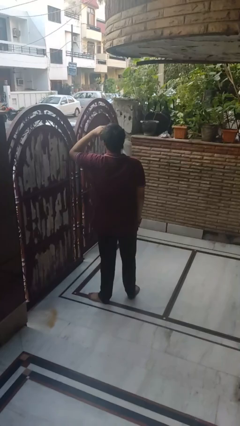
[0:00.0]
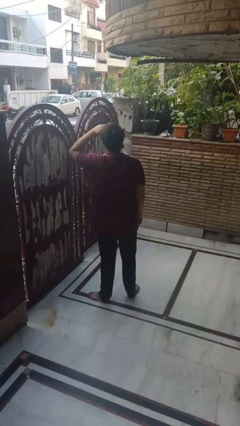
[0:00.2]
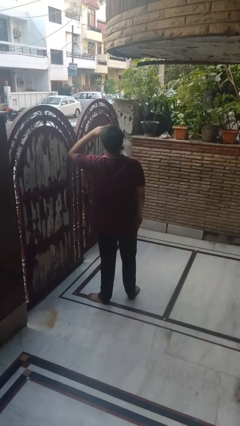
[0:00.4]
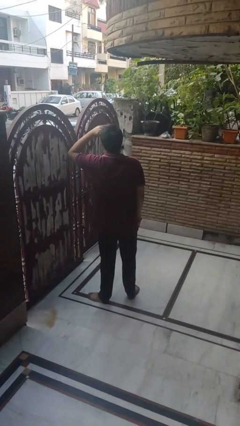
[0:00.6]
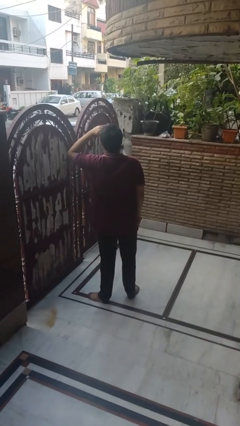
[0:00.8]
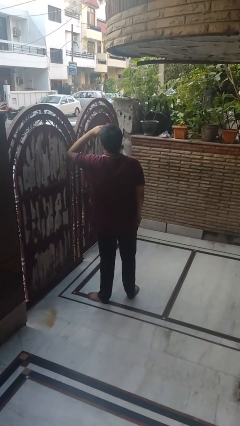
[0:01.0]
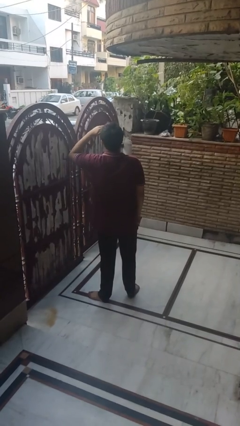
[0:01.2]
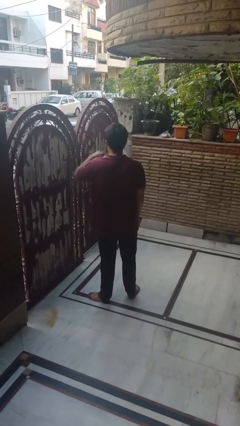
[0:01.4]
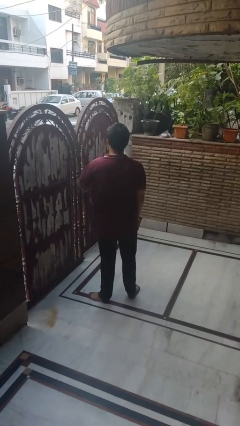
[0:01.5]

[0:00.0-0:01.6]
person shades eyes

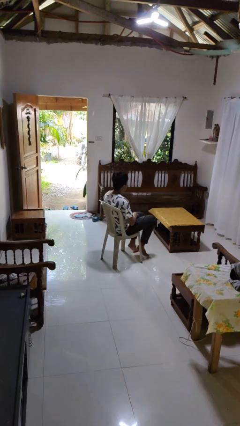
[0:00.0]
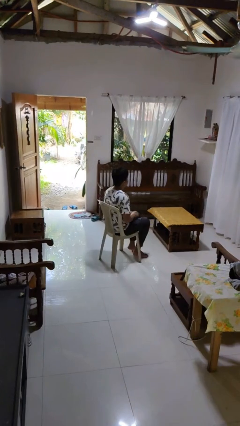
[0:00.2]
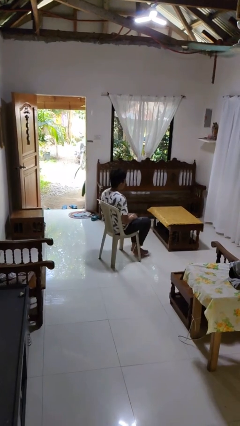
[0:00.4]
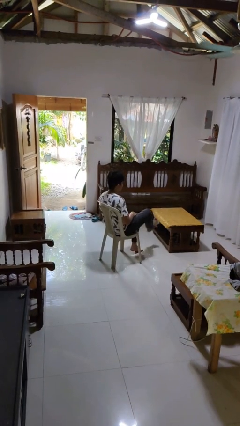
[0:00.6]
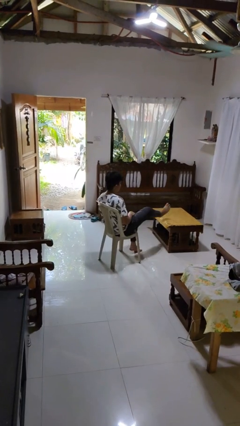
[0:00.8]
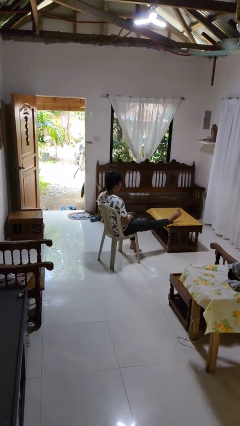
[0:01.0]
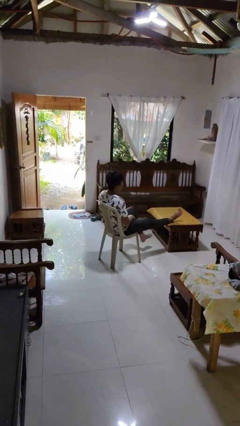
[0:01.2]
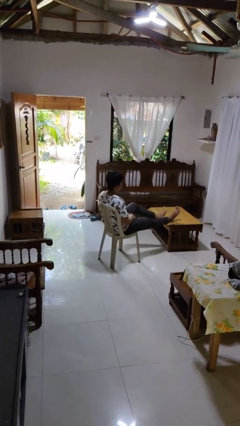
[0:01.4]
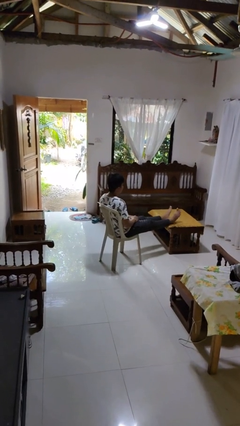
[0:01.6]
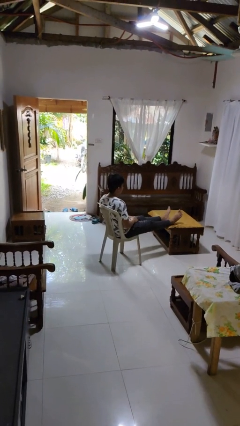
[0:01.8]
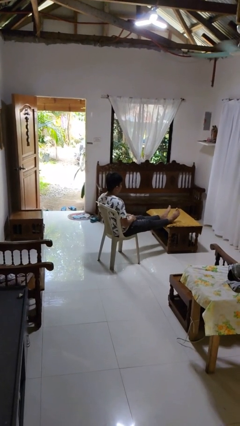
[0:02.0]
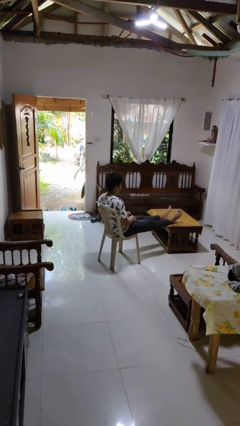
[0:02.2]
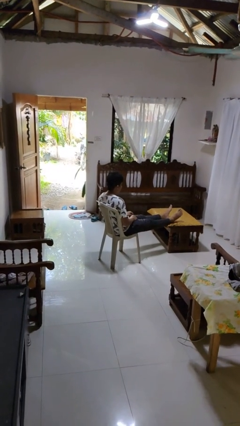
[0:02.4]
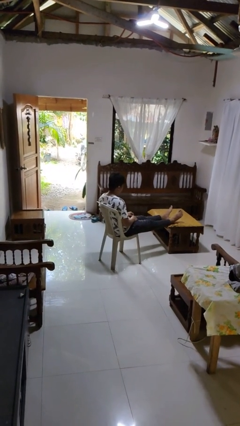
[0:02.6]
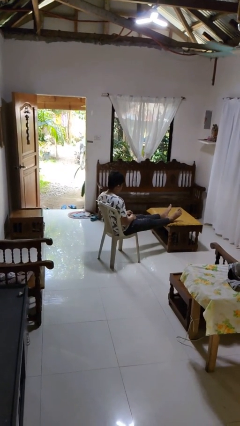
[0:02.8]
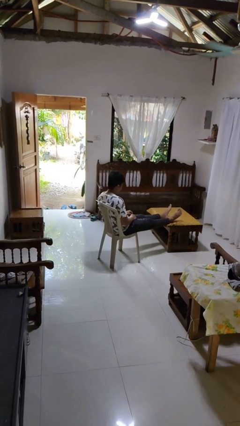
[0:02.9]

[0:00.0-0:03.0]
person puts feet up

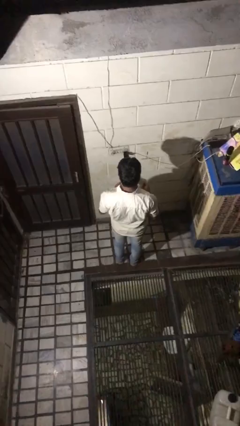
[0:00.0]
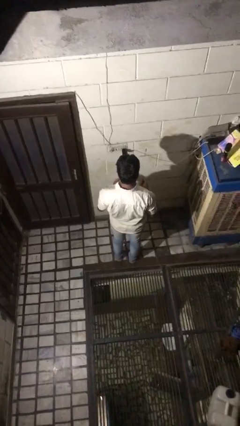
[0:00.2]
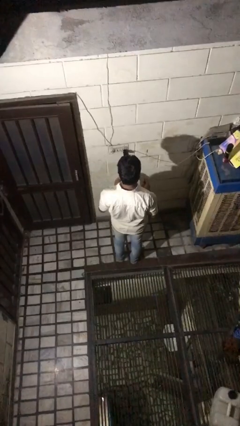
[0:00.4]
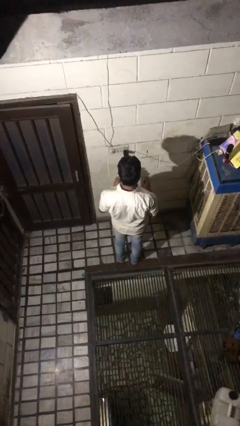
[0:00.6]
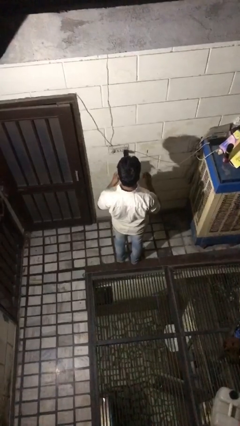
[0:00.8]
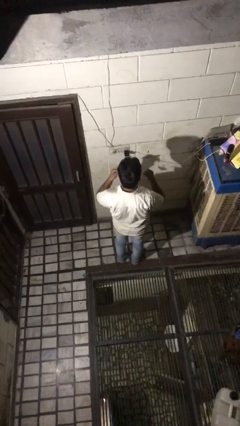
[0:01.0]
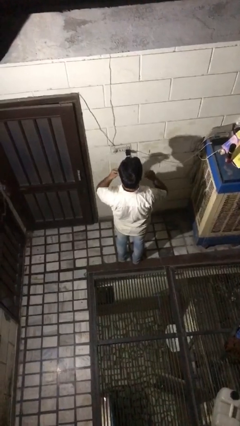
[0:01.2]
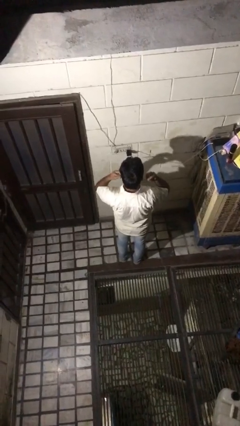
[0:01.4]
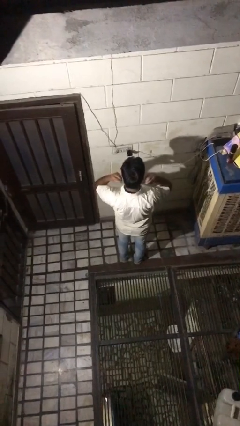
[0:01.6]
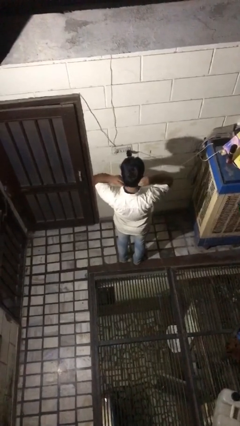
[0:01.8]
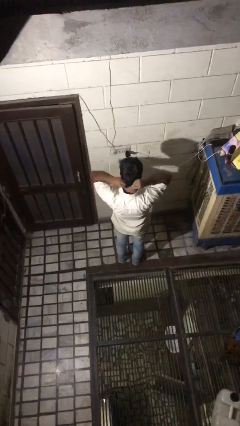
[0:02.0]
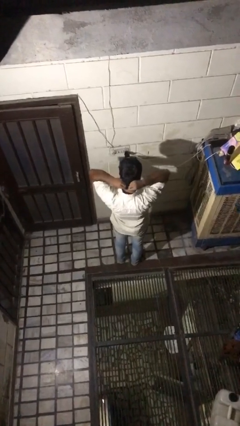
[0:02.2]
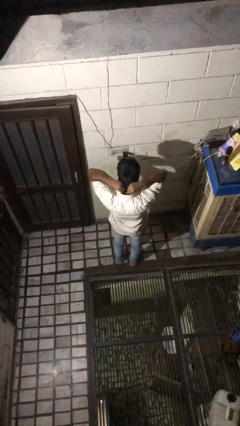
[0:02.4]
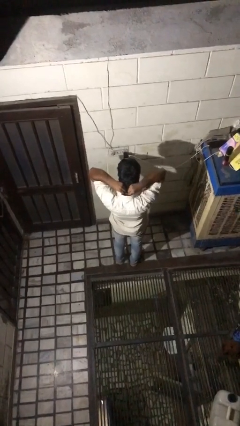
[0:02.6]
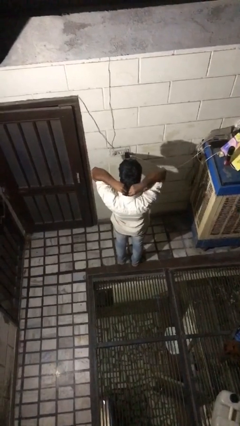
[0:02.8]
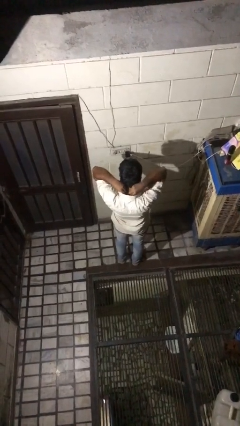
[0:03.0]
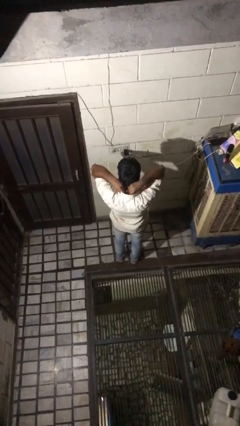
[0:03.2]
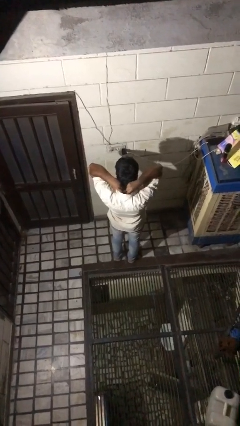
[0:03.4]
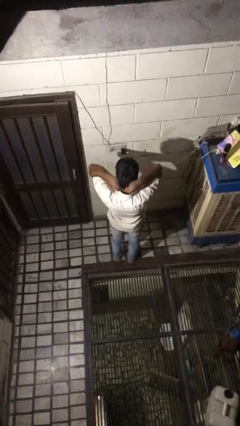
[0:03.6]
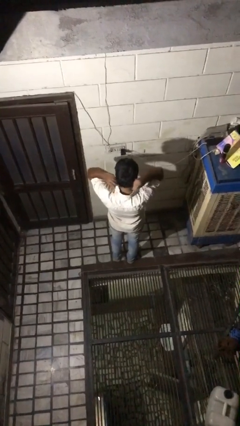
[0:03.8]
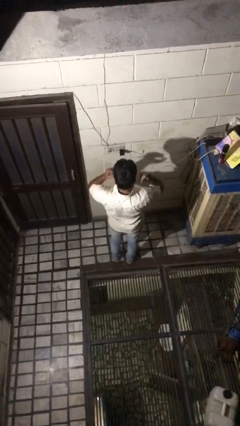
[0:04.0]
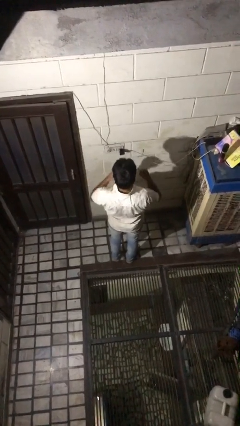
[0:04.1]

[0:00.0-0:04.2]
person puts on necklace

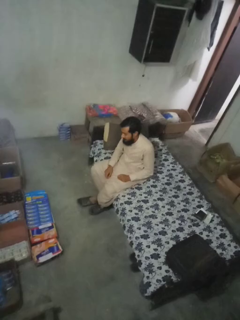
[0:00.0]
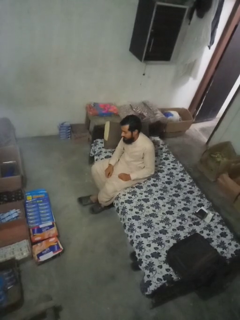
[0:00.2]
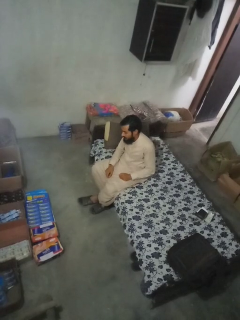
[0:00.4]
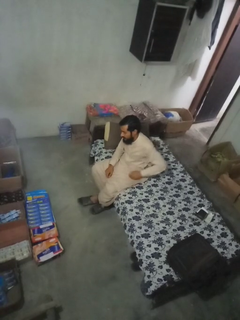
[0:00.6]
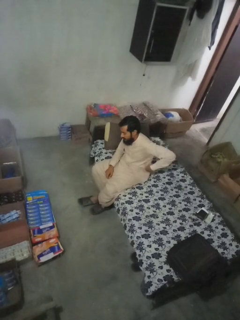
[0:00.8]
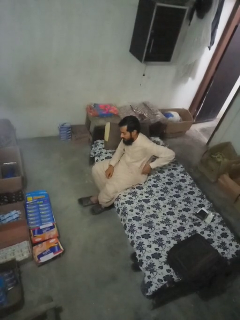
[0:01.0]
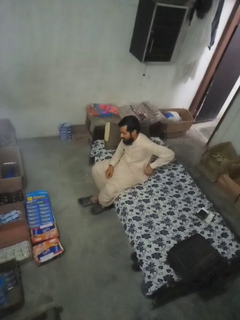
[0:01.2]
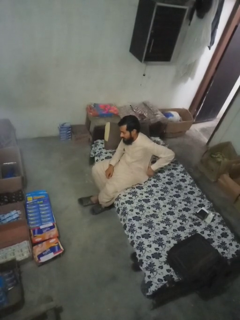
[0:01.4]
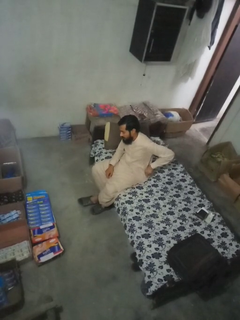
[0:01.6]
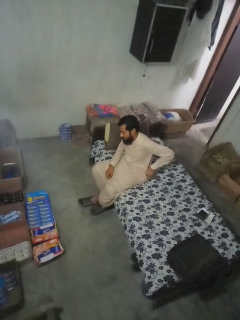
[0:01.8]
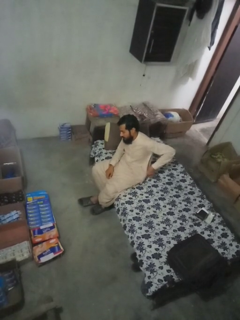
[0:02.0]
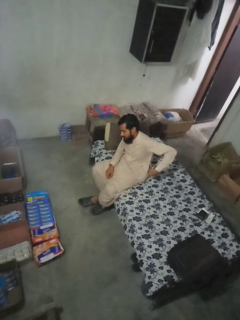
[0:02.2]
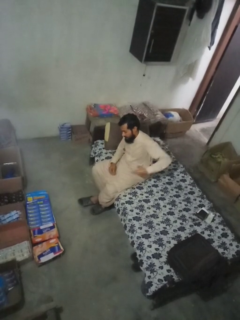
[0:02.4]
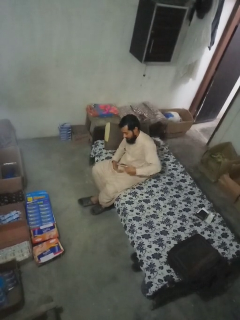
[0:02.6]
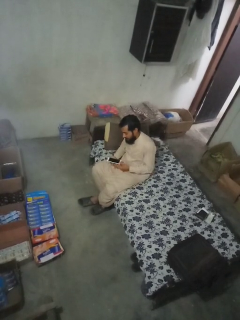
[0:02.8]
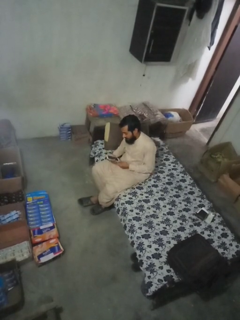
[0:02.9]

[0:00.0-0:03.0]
person takes phone from pocket

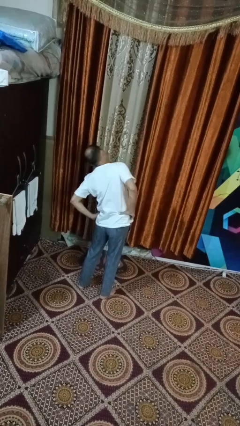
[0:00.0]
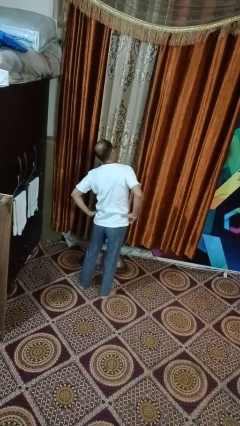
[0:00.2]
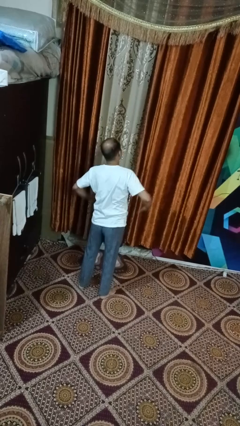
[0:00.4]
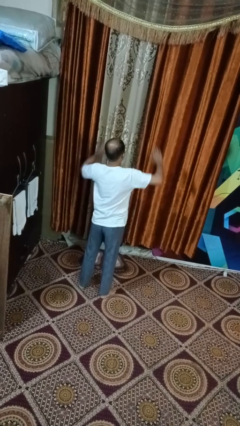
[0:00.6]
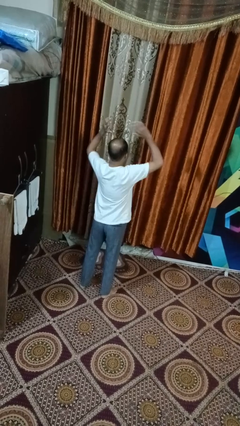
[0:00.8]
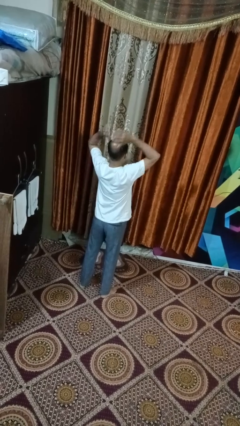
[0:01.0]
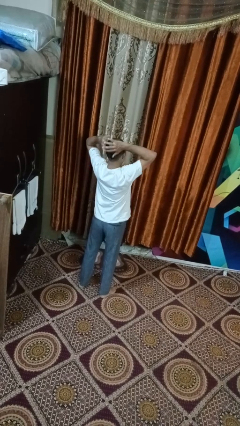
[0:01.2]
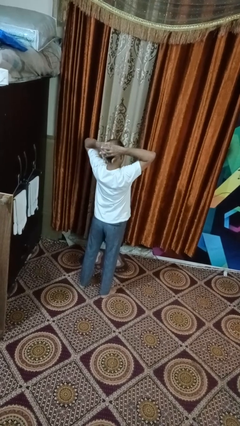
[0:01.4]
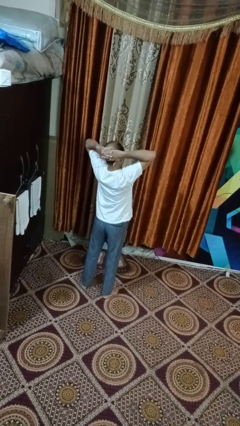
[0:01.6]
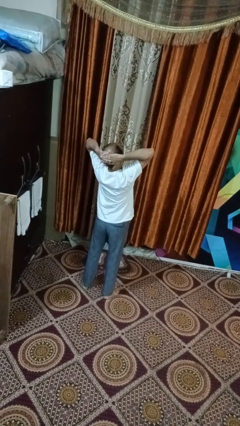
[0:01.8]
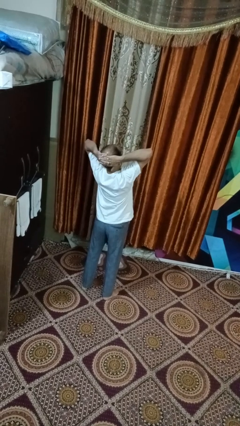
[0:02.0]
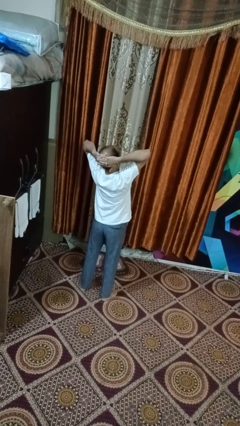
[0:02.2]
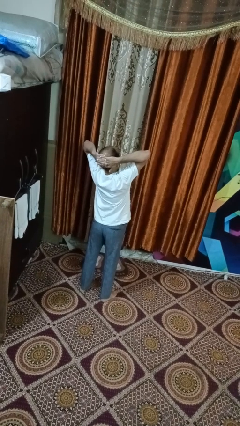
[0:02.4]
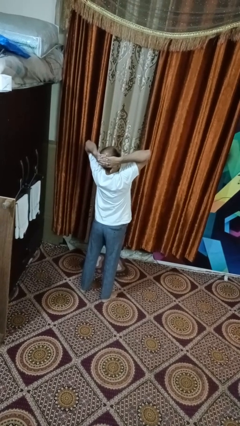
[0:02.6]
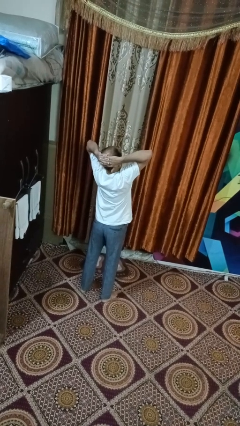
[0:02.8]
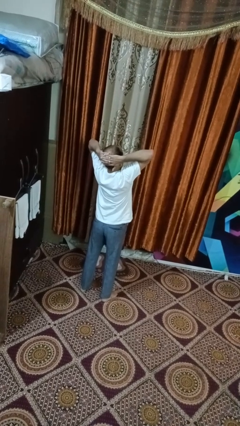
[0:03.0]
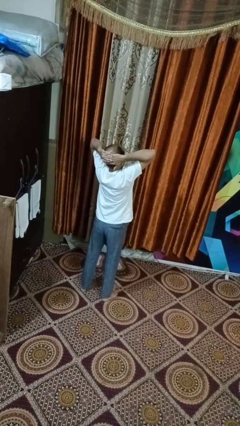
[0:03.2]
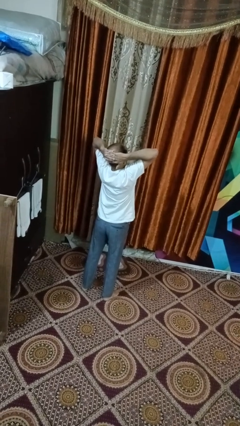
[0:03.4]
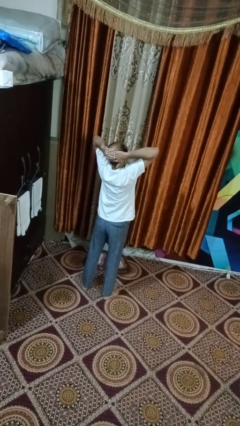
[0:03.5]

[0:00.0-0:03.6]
person stretches arms over head

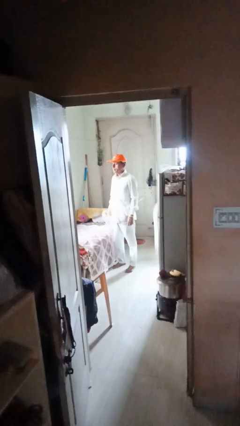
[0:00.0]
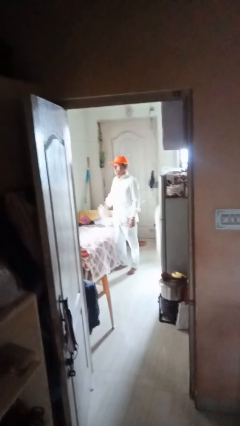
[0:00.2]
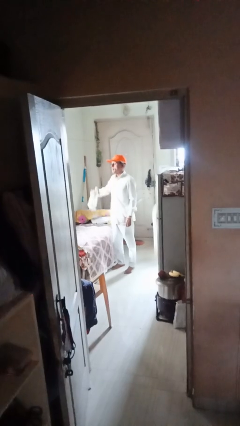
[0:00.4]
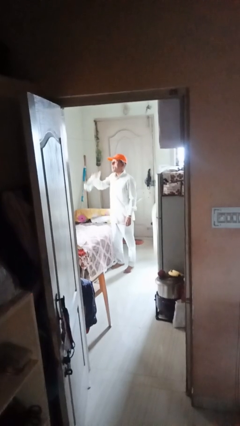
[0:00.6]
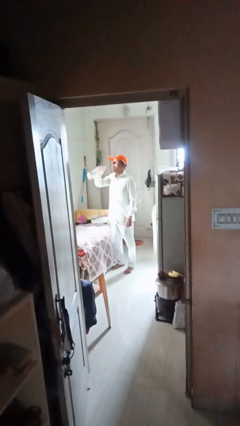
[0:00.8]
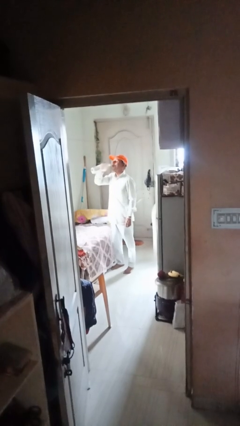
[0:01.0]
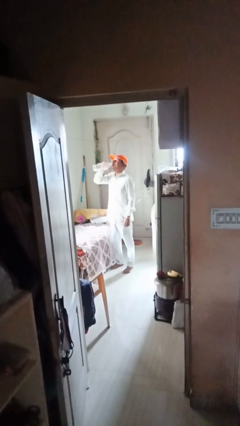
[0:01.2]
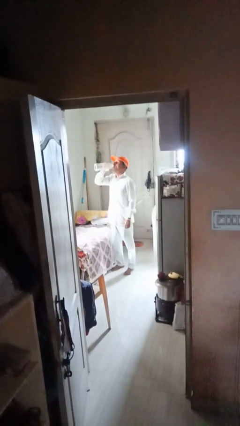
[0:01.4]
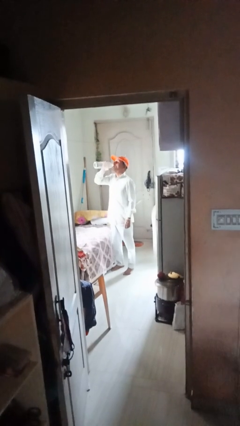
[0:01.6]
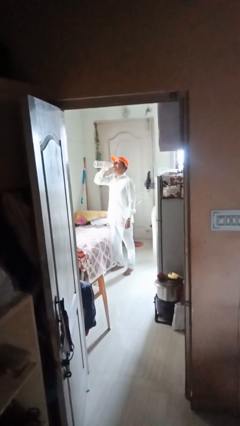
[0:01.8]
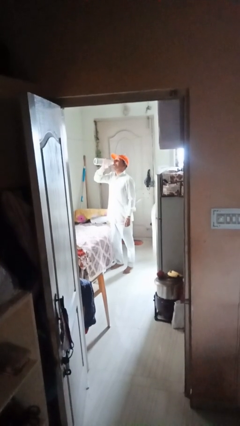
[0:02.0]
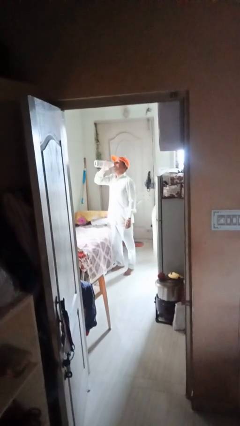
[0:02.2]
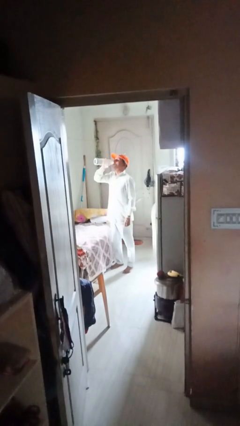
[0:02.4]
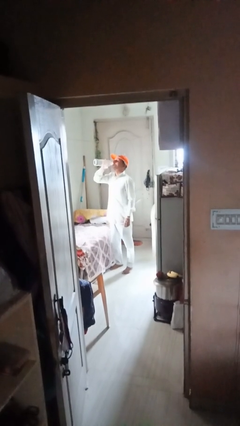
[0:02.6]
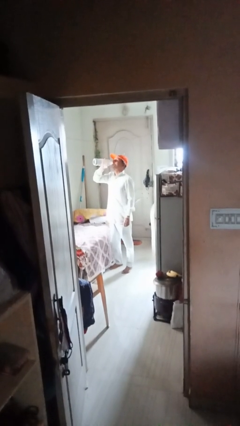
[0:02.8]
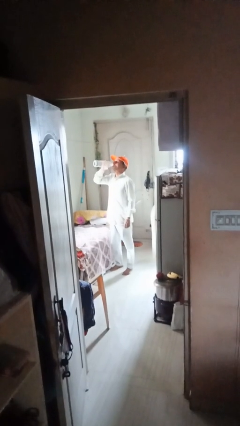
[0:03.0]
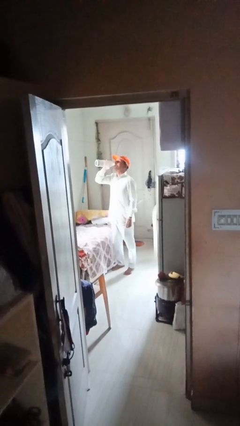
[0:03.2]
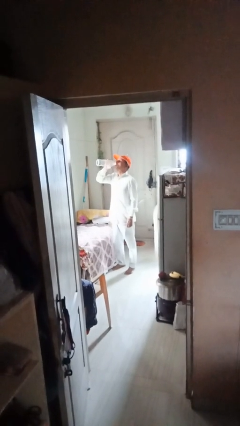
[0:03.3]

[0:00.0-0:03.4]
person drinks from bottle
